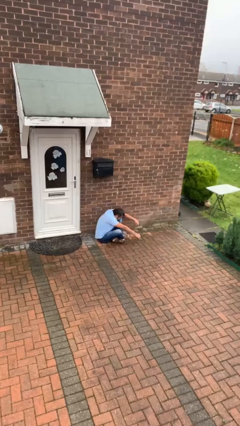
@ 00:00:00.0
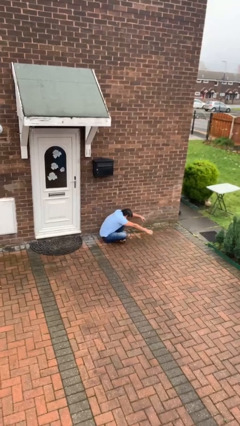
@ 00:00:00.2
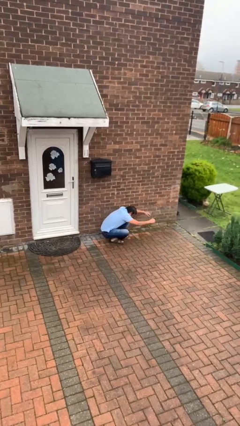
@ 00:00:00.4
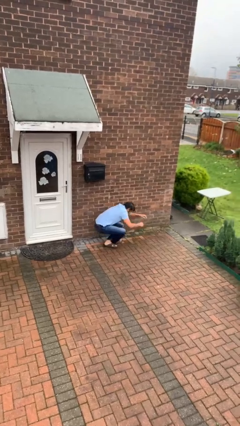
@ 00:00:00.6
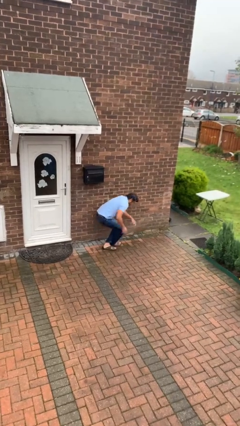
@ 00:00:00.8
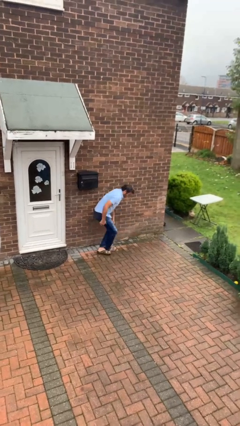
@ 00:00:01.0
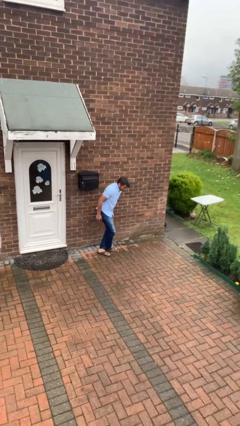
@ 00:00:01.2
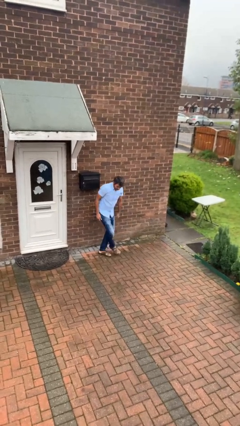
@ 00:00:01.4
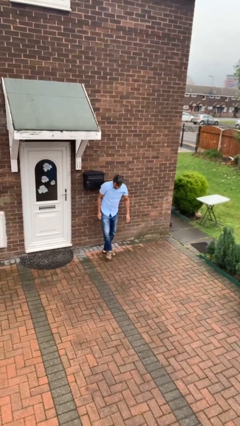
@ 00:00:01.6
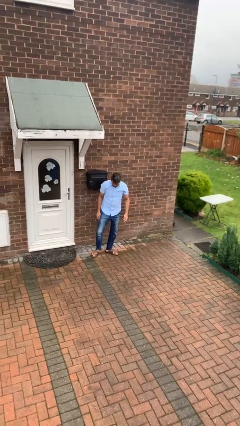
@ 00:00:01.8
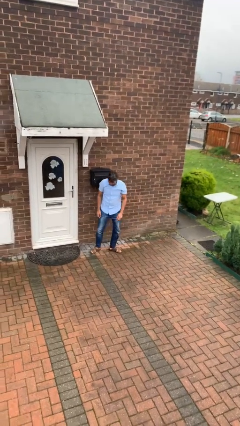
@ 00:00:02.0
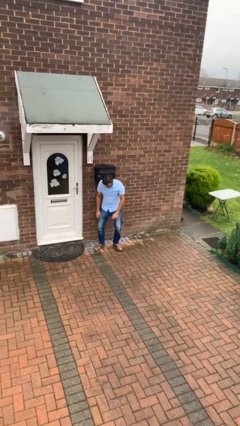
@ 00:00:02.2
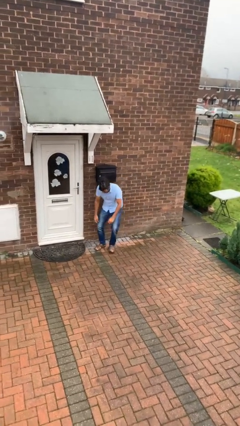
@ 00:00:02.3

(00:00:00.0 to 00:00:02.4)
person stands up

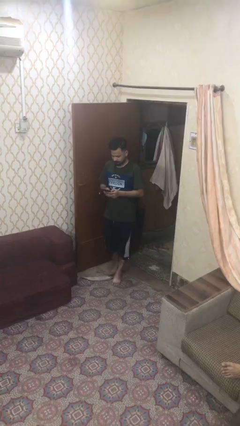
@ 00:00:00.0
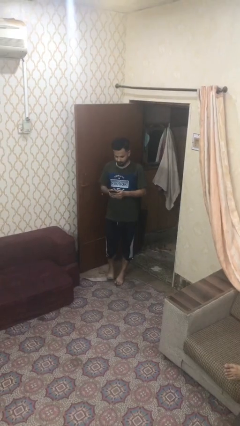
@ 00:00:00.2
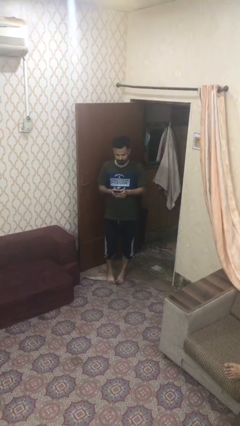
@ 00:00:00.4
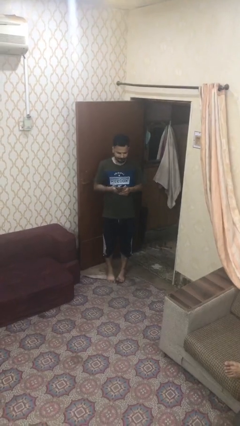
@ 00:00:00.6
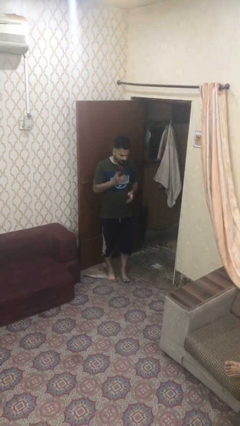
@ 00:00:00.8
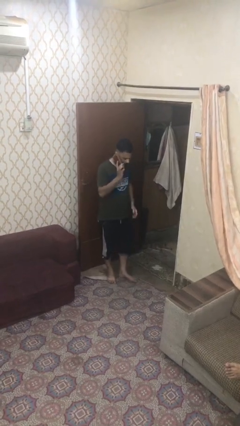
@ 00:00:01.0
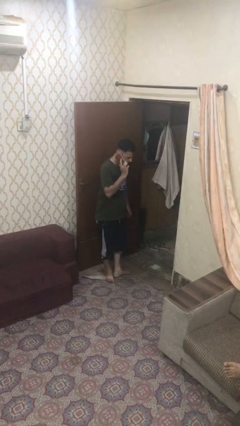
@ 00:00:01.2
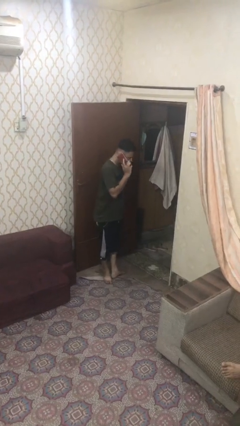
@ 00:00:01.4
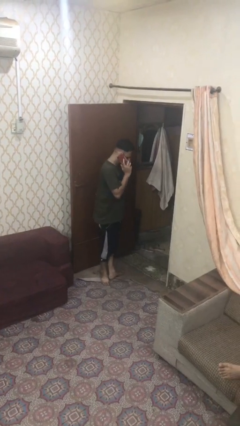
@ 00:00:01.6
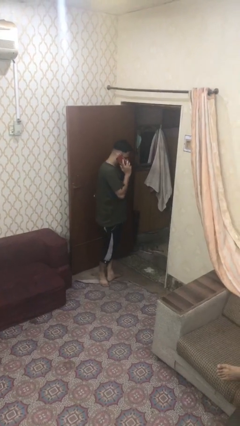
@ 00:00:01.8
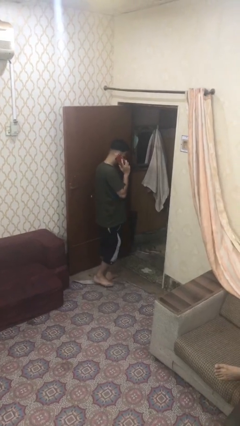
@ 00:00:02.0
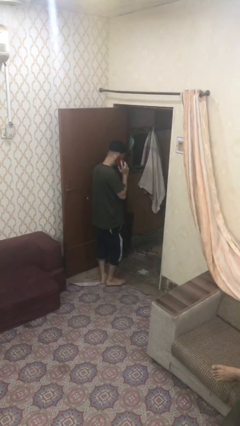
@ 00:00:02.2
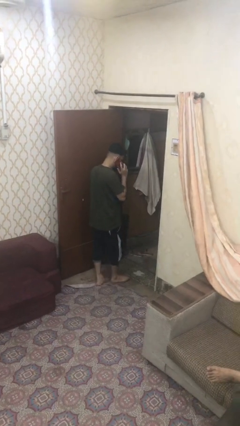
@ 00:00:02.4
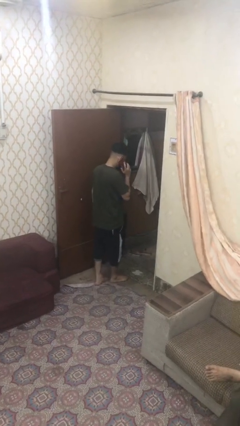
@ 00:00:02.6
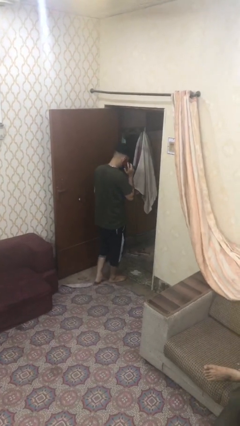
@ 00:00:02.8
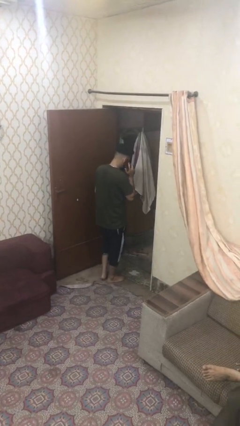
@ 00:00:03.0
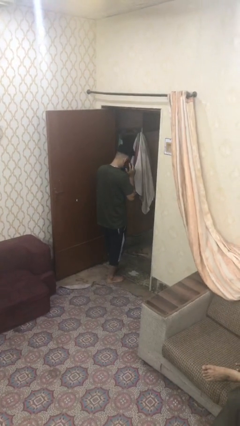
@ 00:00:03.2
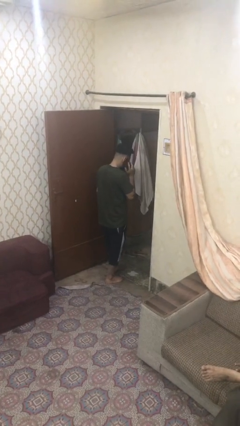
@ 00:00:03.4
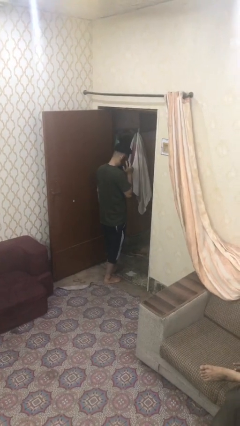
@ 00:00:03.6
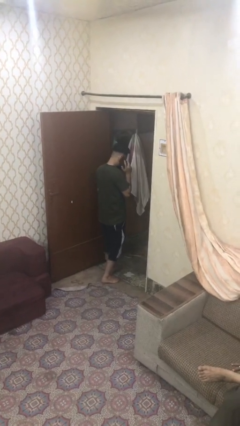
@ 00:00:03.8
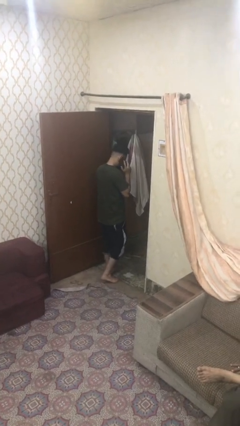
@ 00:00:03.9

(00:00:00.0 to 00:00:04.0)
person talks on phone

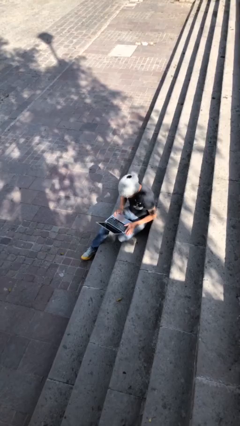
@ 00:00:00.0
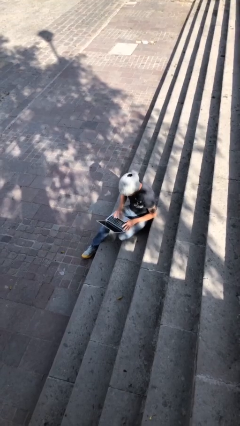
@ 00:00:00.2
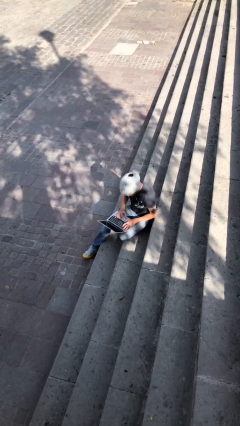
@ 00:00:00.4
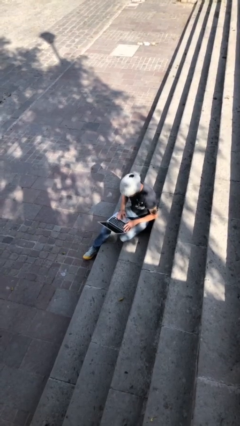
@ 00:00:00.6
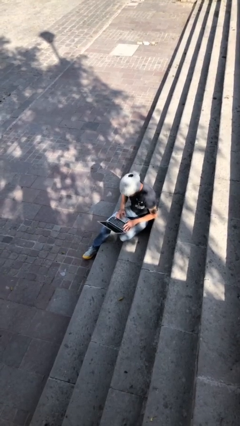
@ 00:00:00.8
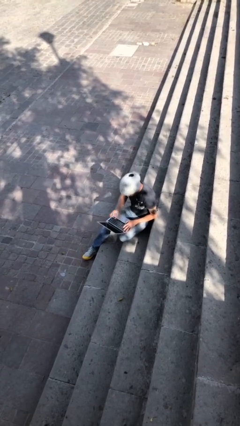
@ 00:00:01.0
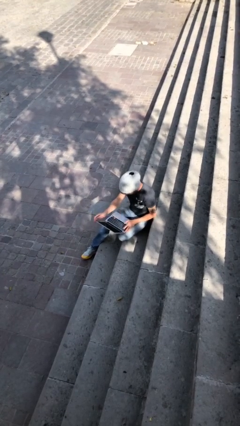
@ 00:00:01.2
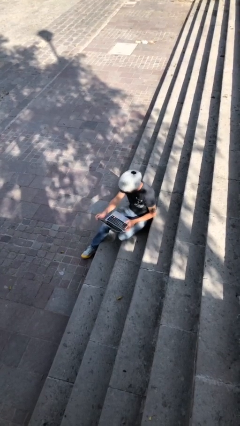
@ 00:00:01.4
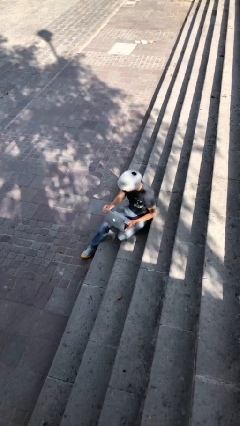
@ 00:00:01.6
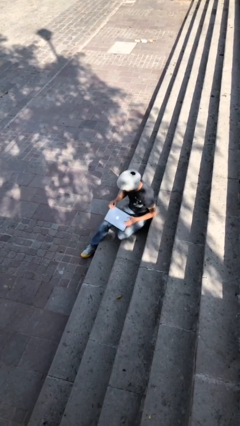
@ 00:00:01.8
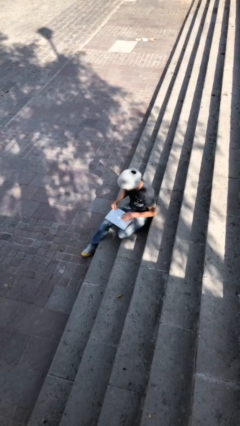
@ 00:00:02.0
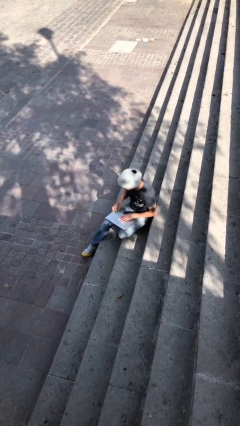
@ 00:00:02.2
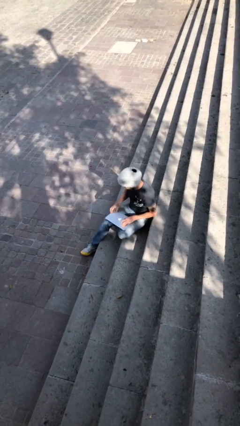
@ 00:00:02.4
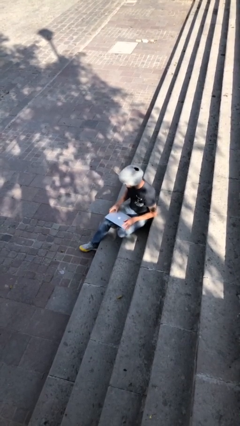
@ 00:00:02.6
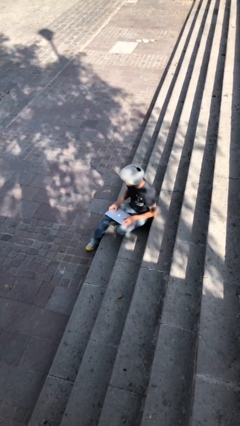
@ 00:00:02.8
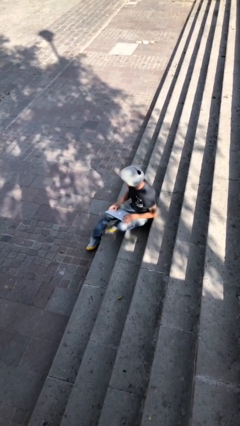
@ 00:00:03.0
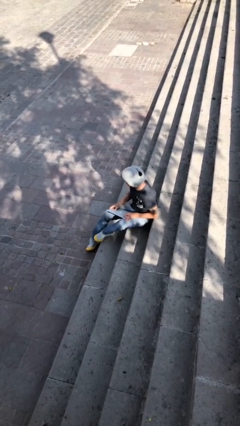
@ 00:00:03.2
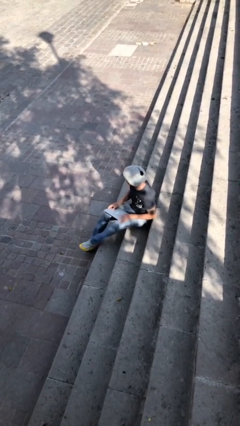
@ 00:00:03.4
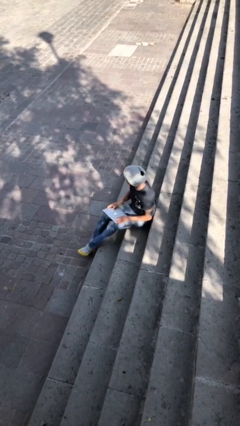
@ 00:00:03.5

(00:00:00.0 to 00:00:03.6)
person interacts with laptop

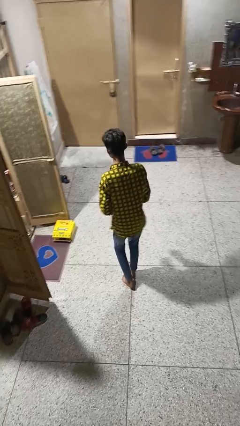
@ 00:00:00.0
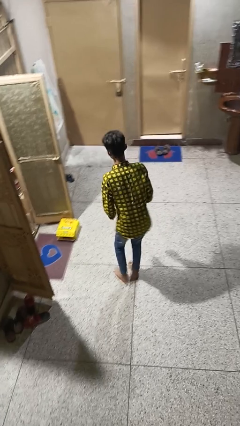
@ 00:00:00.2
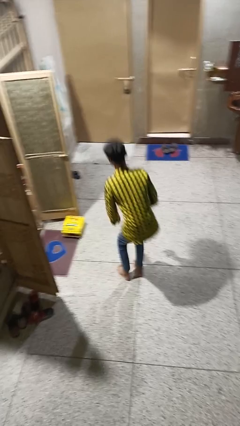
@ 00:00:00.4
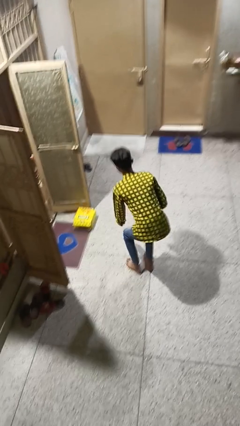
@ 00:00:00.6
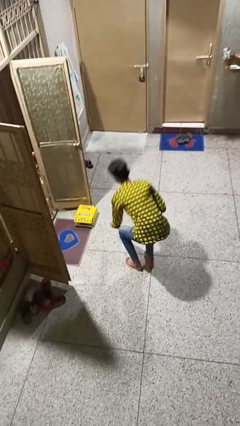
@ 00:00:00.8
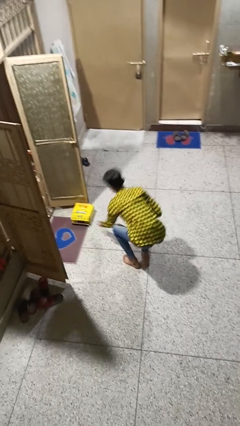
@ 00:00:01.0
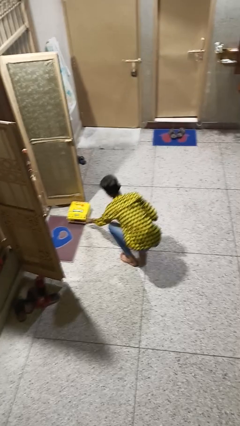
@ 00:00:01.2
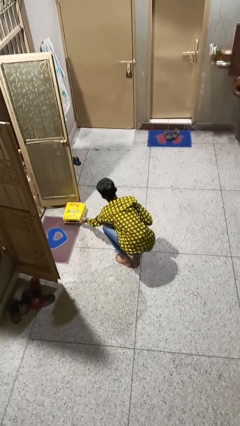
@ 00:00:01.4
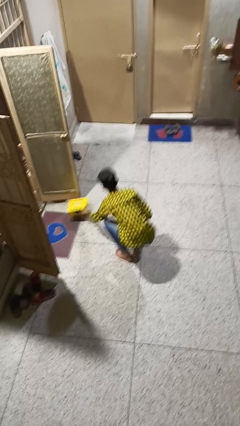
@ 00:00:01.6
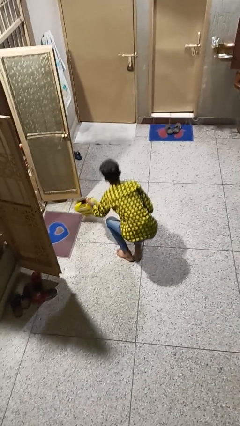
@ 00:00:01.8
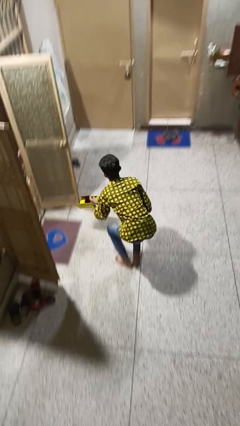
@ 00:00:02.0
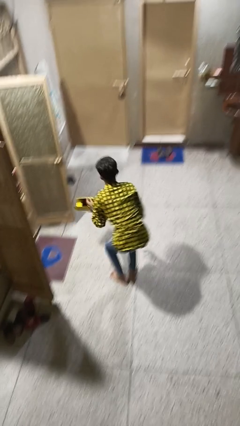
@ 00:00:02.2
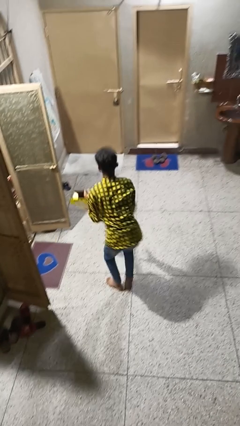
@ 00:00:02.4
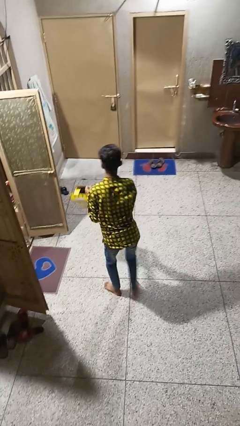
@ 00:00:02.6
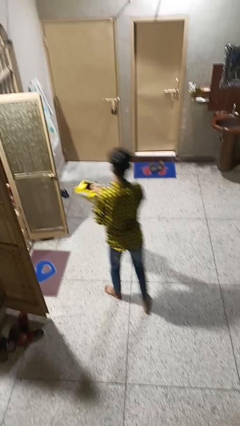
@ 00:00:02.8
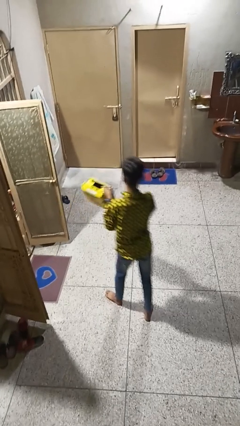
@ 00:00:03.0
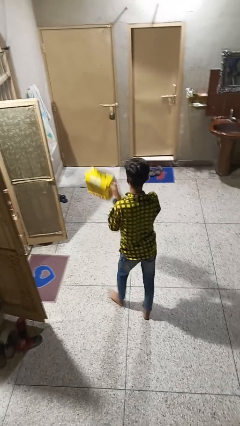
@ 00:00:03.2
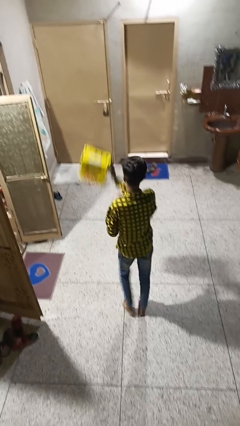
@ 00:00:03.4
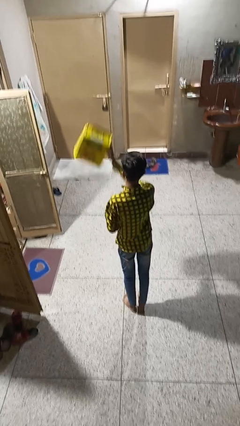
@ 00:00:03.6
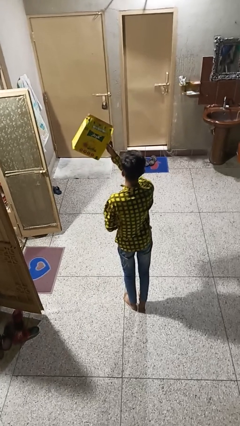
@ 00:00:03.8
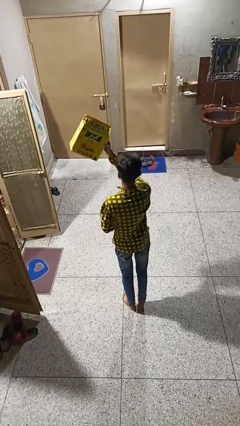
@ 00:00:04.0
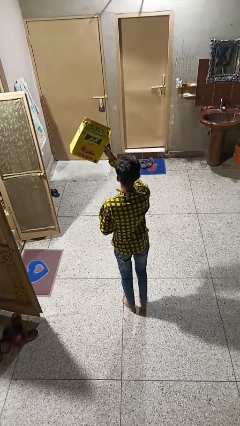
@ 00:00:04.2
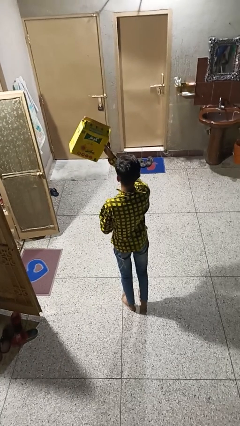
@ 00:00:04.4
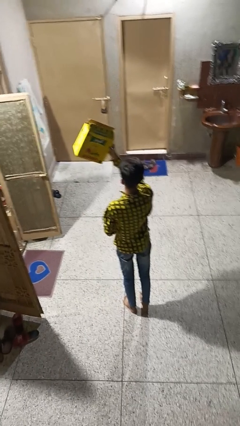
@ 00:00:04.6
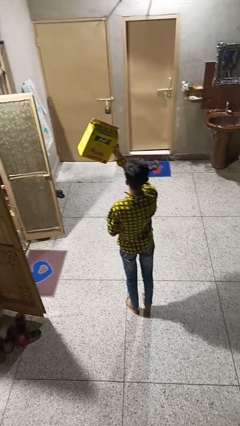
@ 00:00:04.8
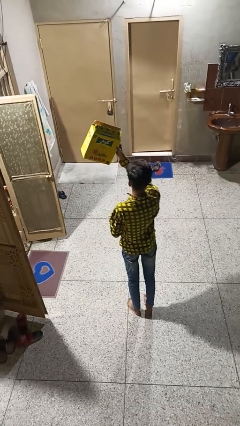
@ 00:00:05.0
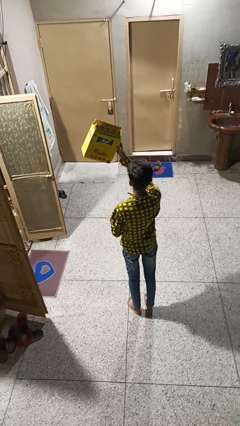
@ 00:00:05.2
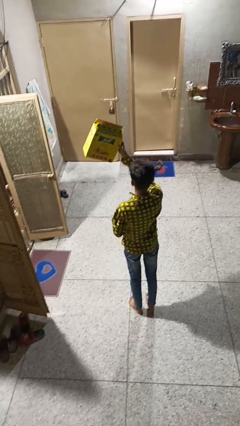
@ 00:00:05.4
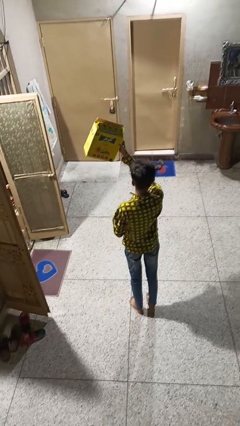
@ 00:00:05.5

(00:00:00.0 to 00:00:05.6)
person picks up object from floor

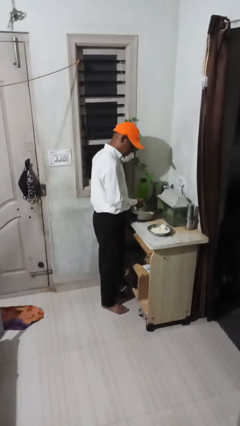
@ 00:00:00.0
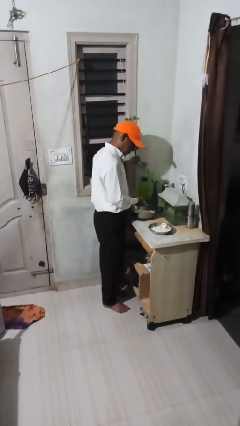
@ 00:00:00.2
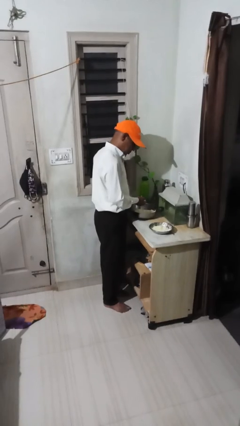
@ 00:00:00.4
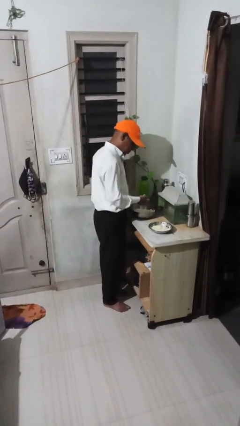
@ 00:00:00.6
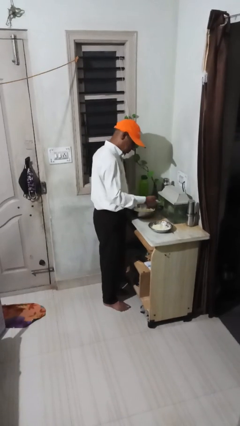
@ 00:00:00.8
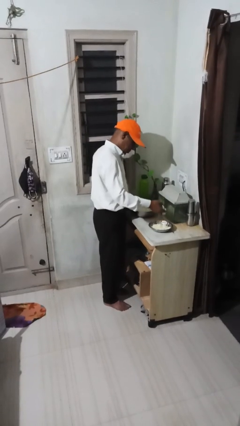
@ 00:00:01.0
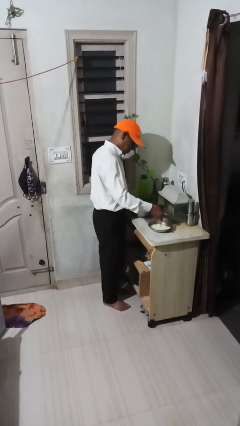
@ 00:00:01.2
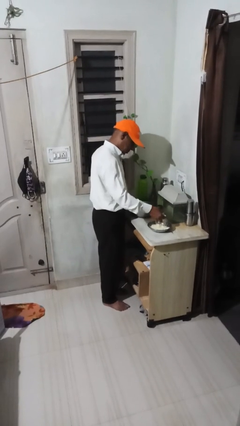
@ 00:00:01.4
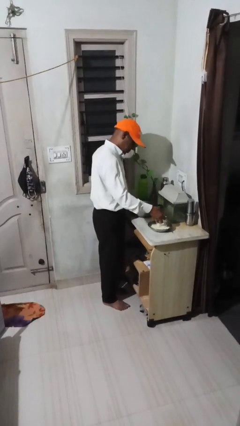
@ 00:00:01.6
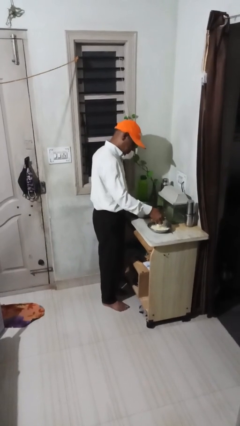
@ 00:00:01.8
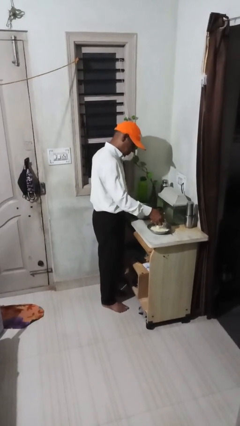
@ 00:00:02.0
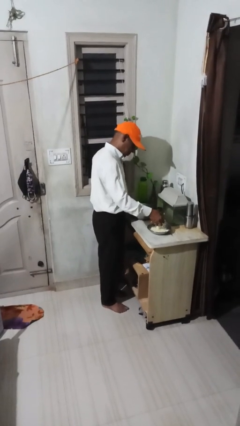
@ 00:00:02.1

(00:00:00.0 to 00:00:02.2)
person pours into bowl
